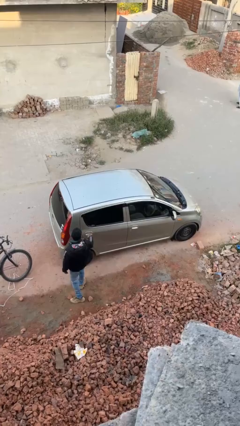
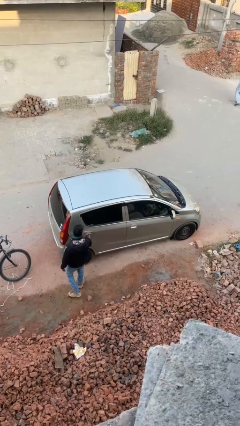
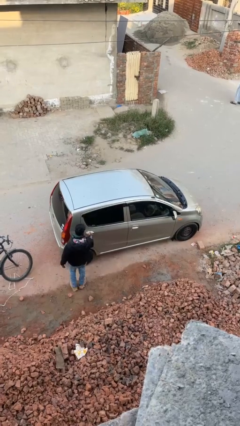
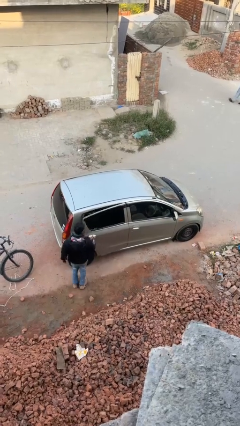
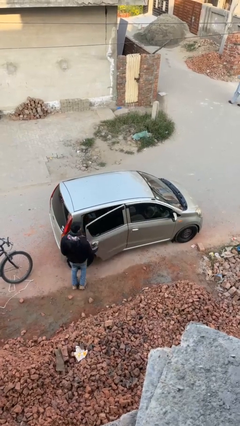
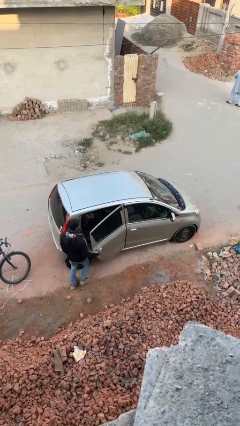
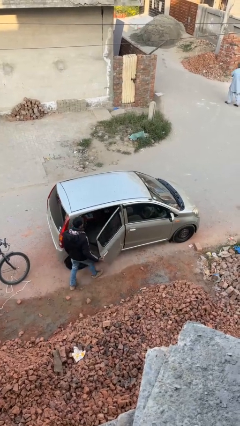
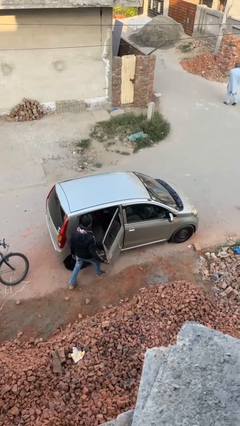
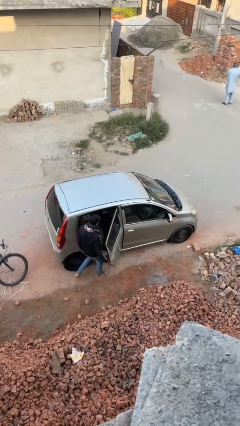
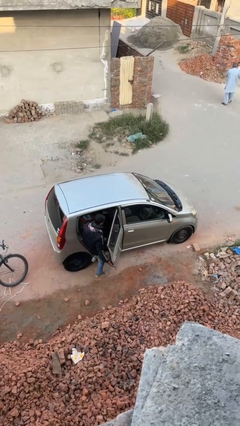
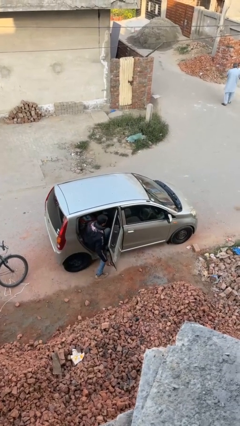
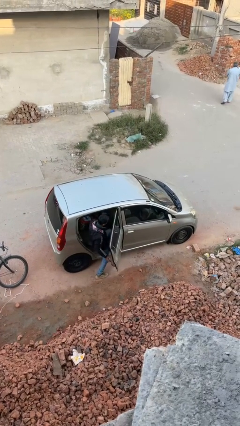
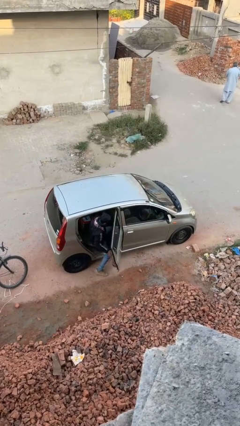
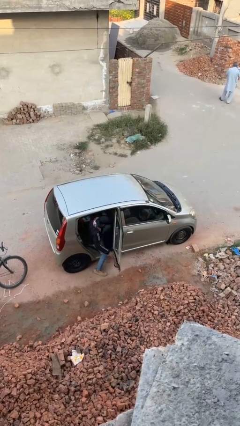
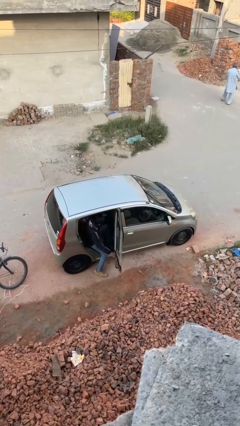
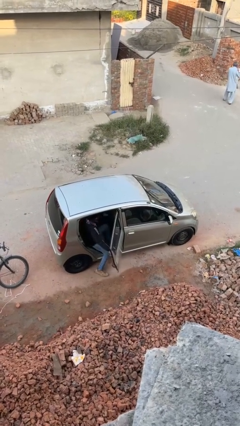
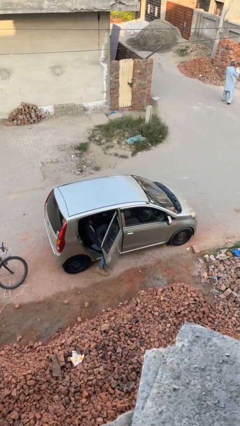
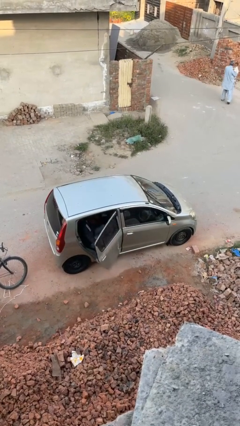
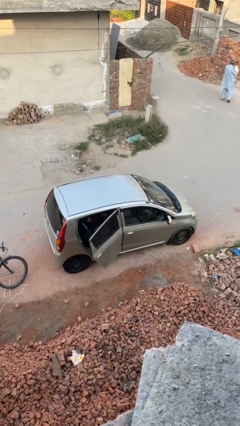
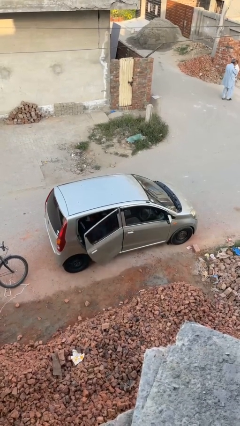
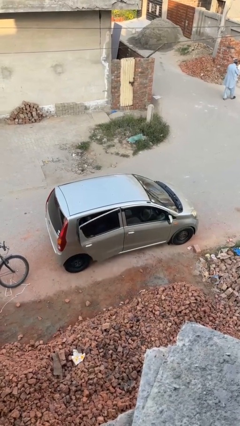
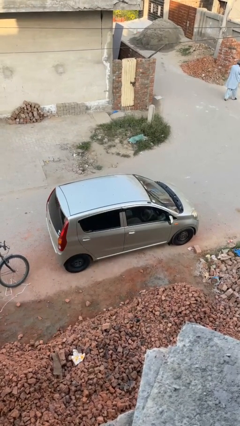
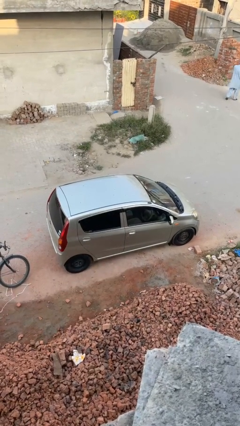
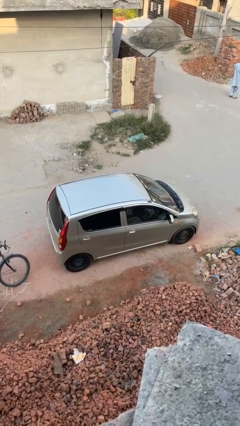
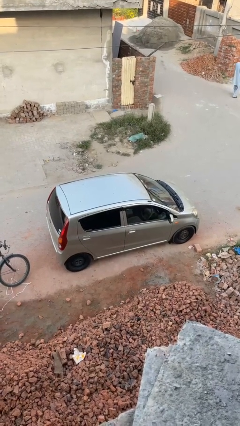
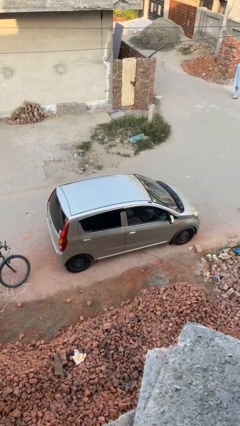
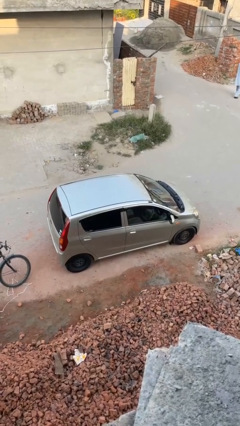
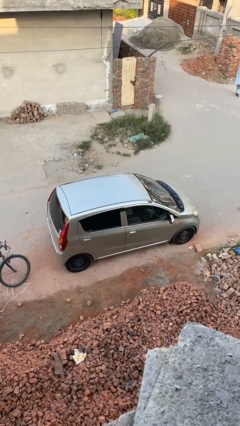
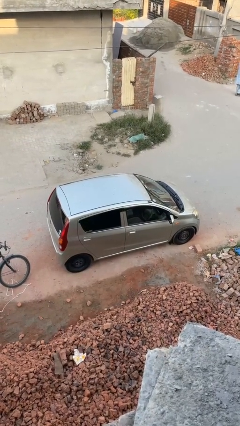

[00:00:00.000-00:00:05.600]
car picks up person

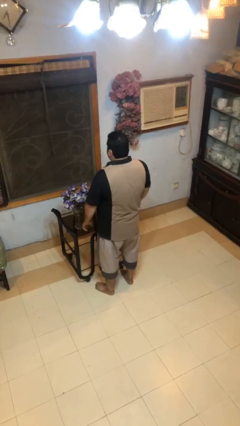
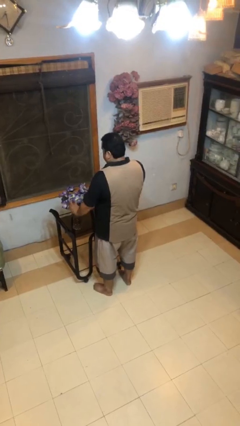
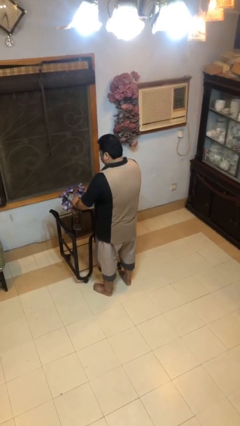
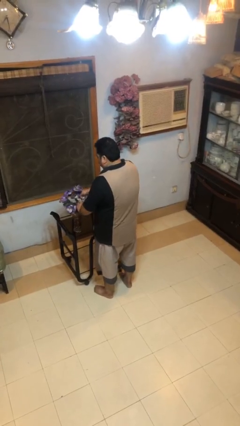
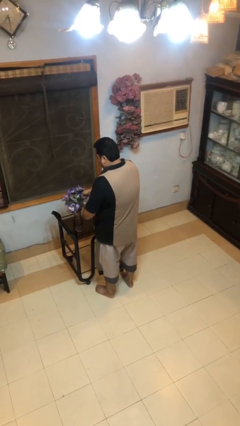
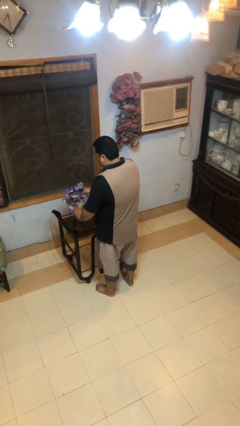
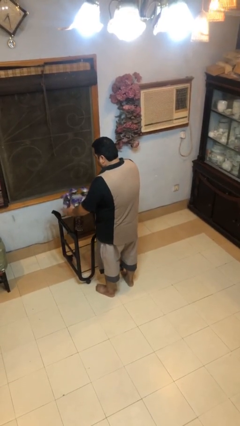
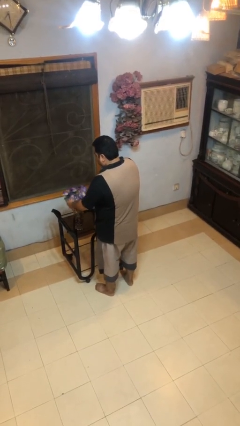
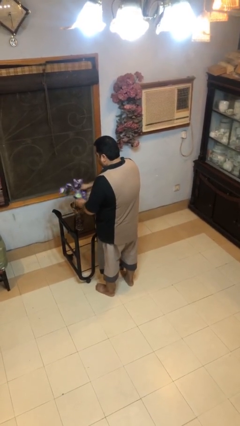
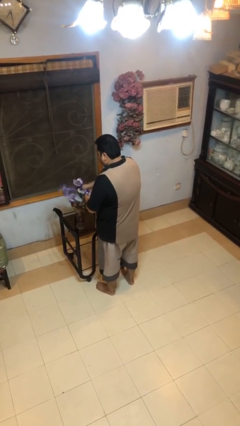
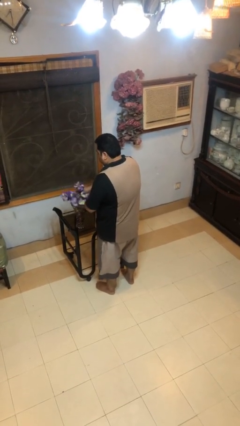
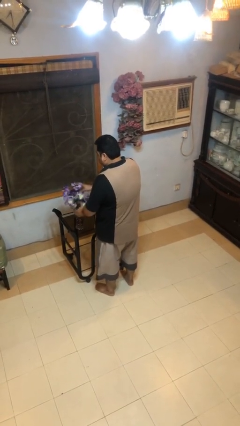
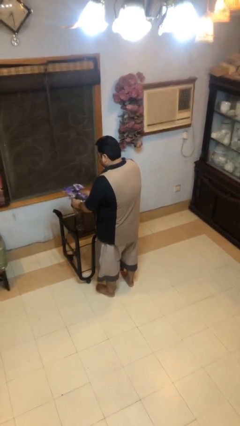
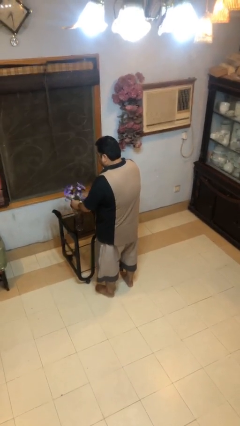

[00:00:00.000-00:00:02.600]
person arranges flowers in vase

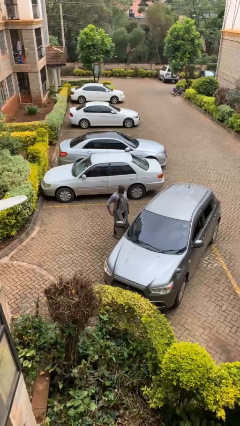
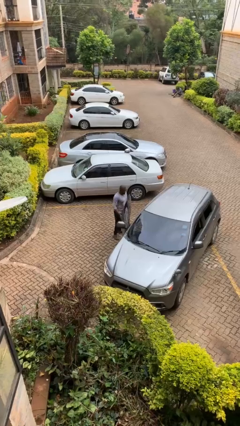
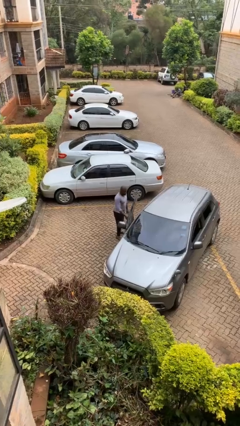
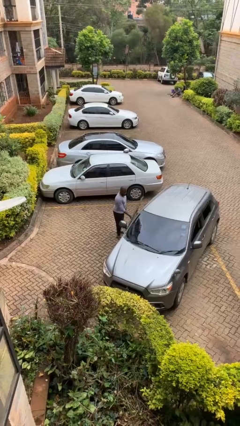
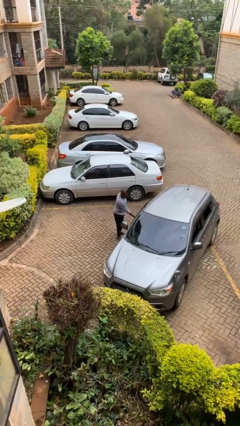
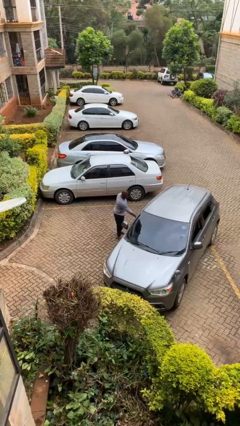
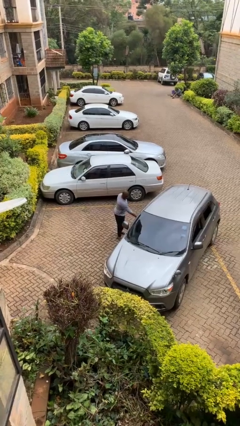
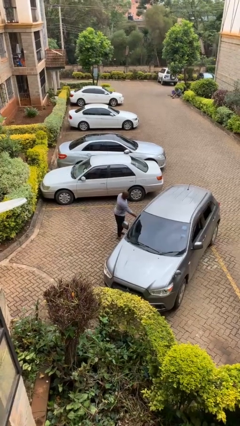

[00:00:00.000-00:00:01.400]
person closes car door

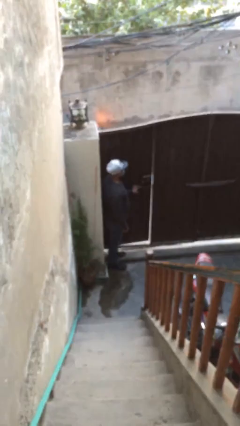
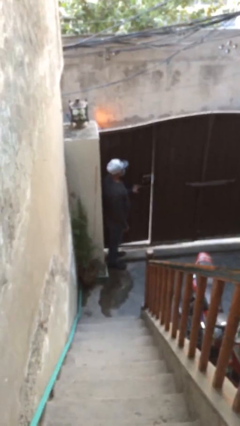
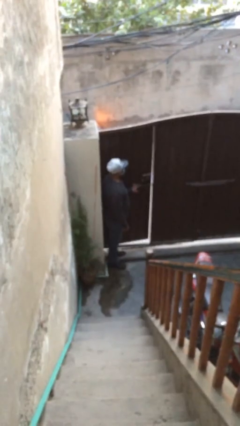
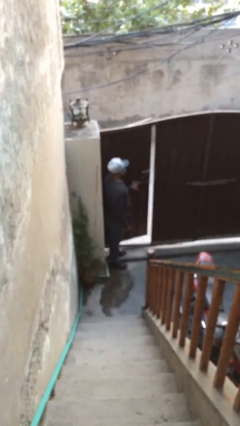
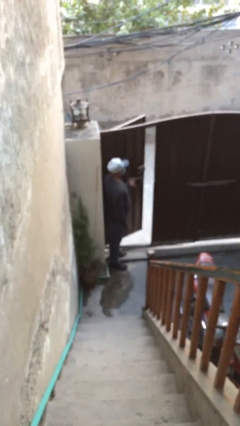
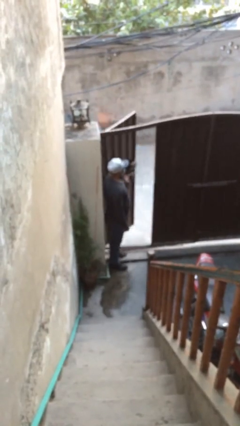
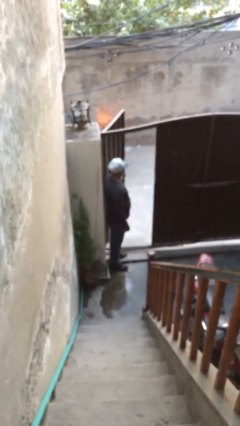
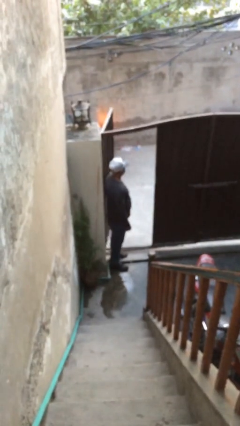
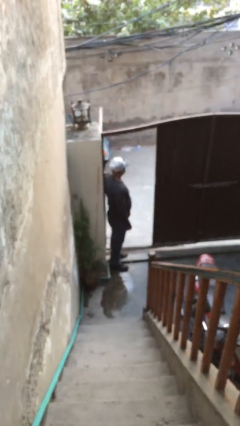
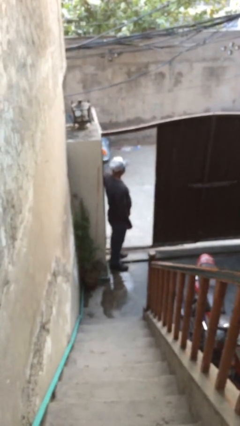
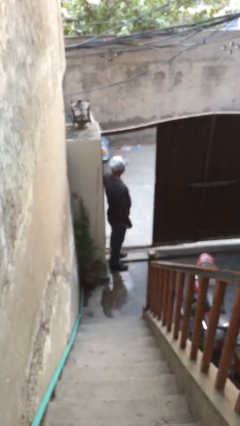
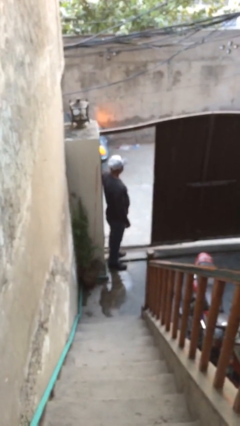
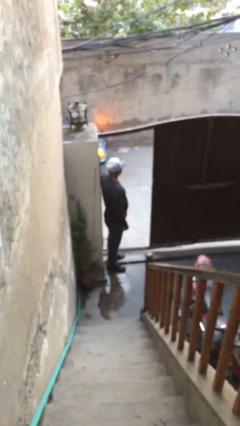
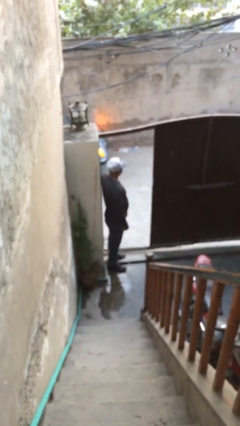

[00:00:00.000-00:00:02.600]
person opens facility door

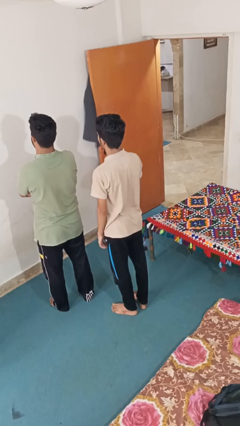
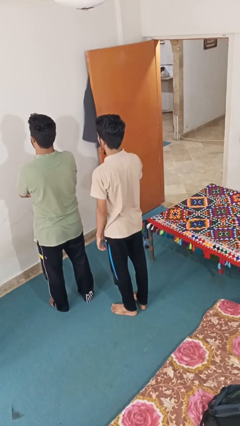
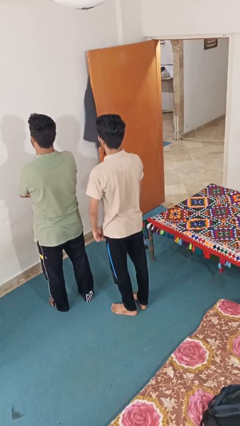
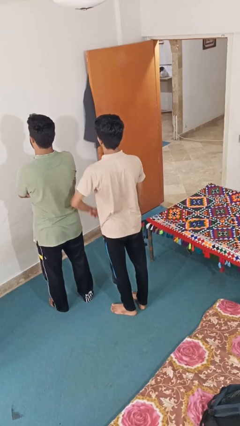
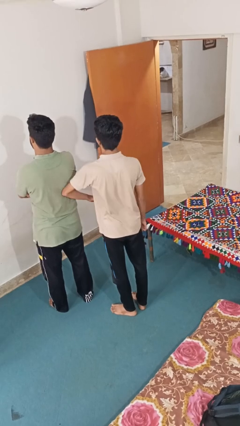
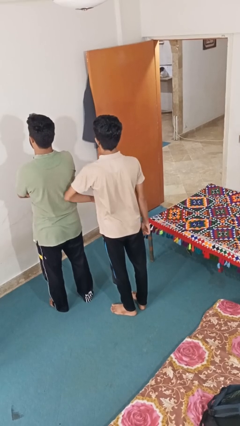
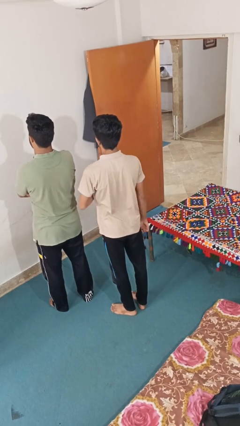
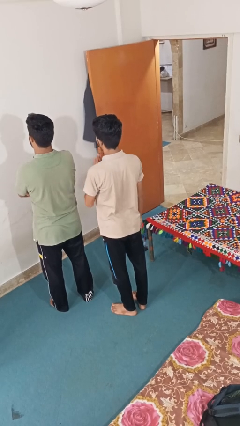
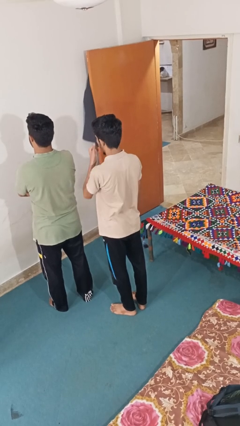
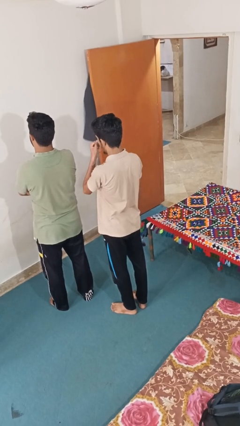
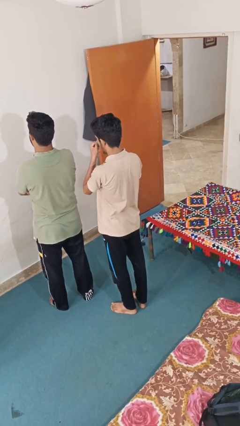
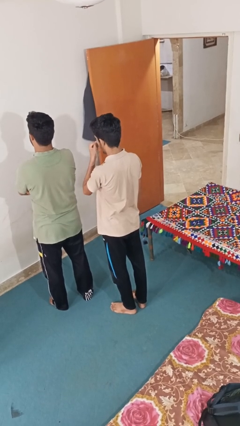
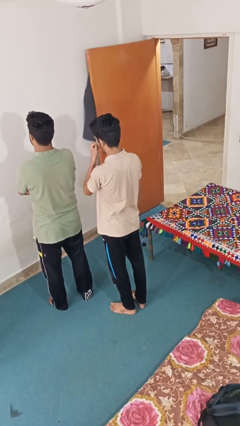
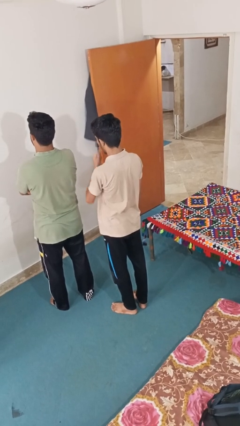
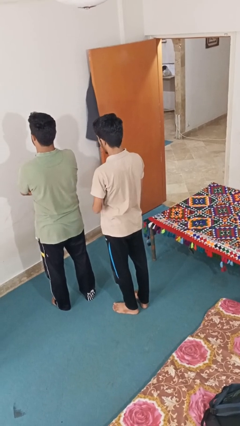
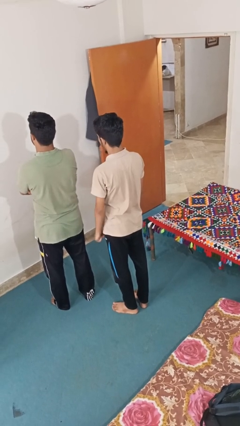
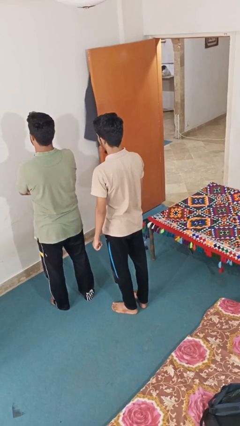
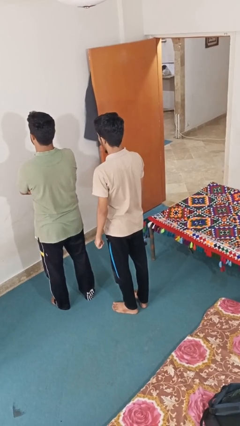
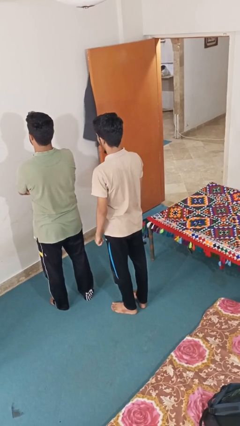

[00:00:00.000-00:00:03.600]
person nudges person with elbow

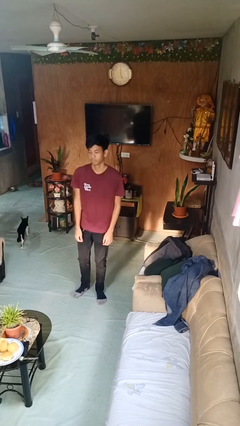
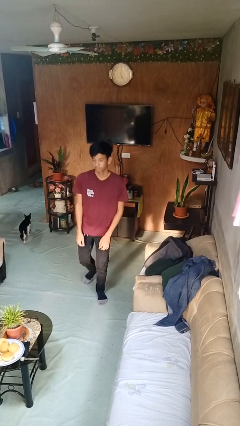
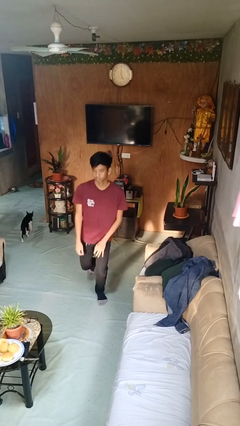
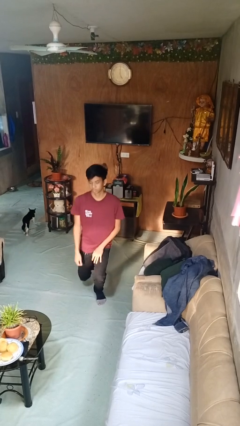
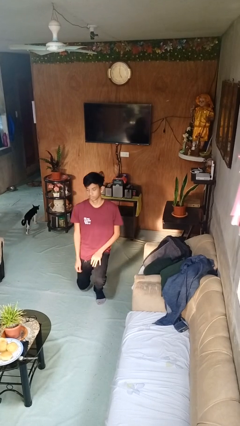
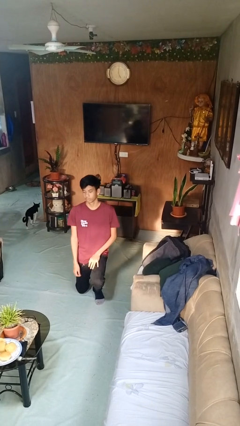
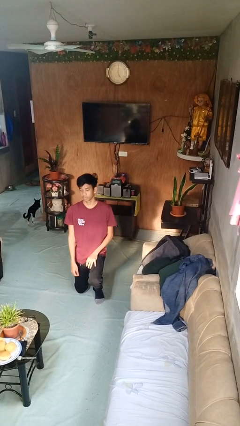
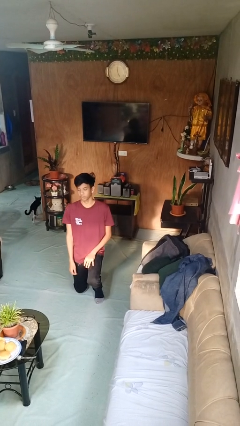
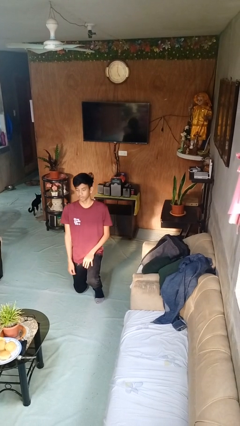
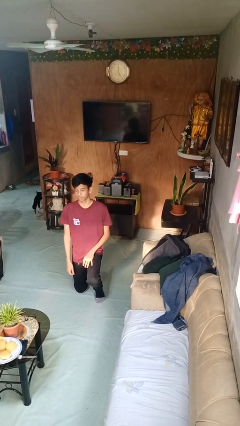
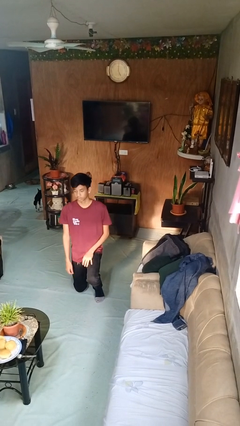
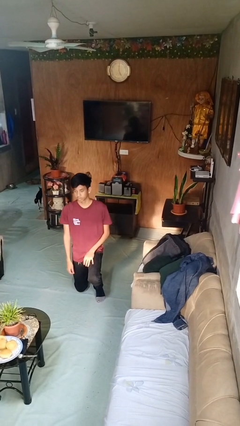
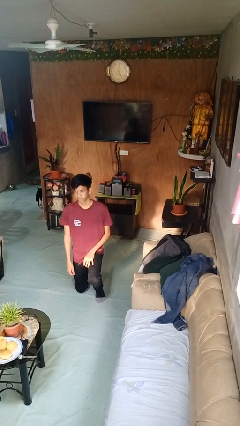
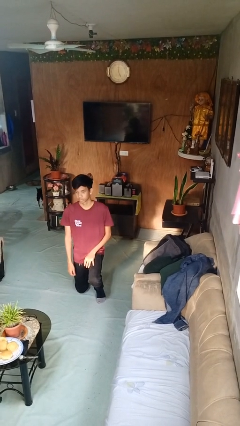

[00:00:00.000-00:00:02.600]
person kneels
